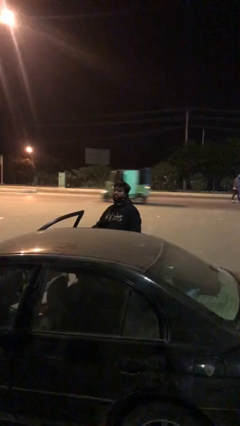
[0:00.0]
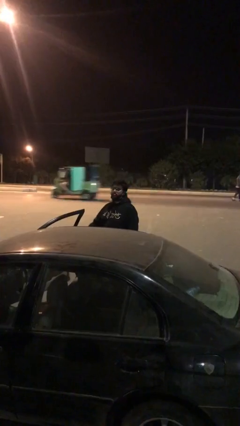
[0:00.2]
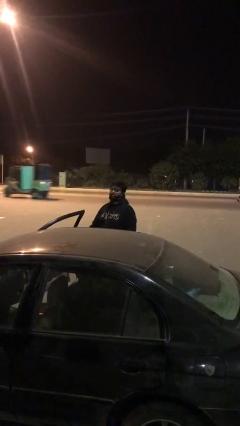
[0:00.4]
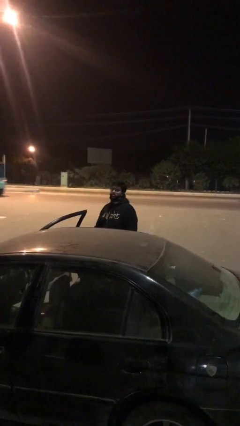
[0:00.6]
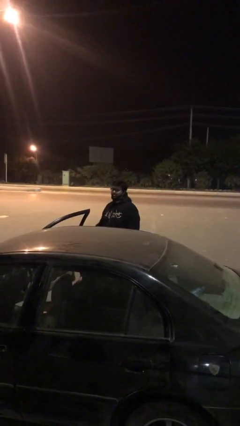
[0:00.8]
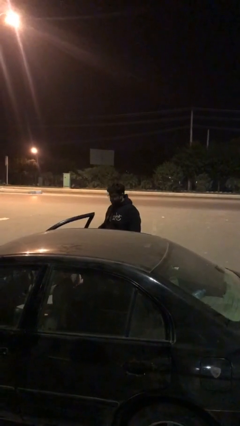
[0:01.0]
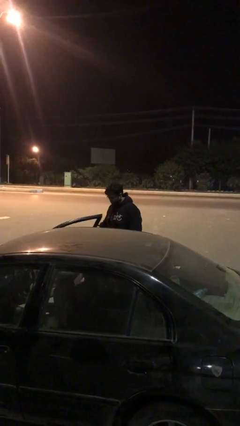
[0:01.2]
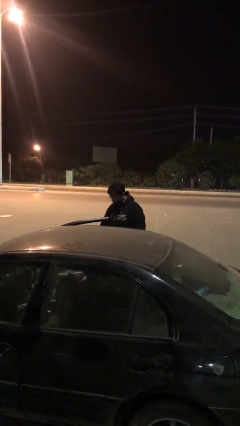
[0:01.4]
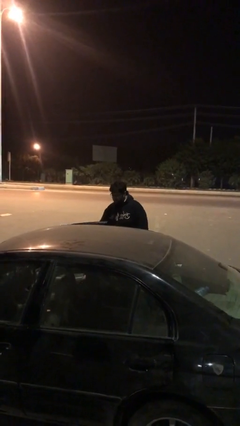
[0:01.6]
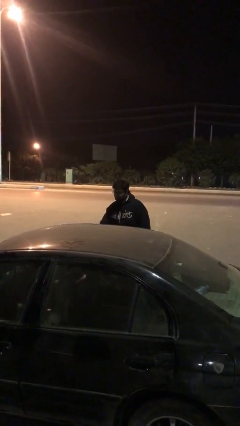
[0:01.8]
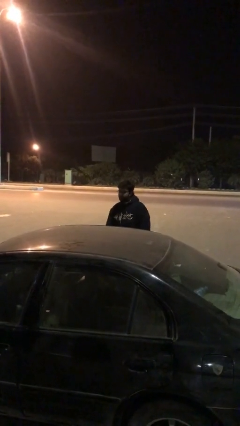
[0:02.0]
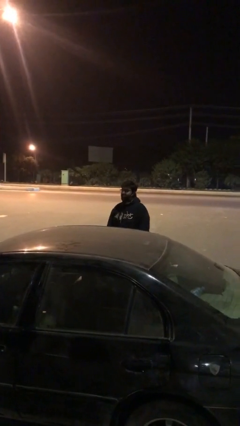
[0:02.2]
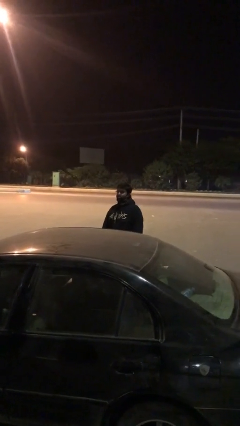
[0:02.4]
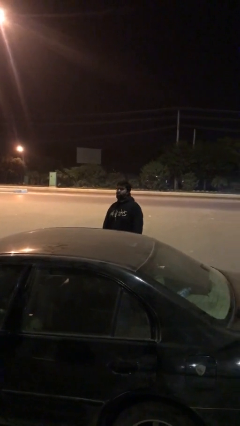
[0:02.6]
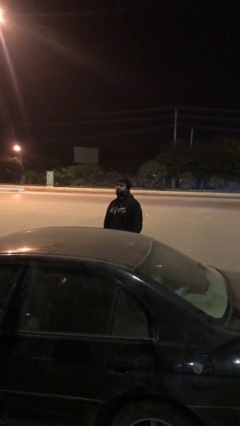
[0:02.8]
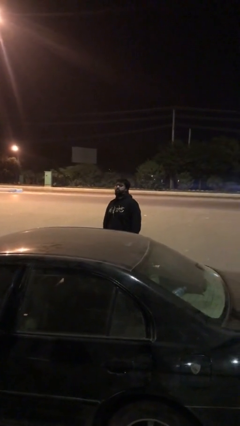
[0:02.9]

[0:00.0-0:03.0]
person closes car door

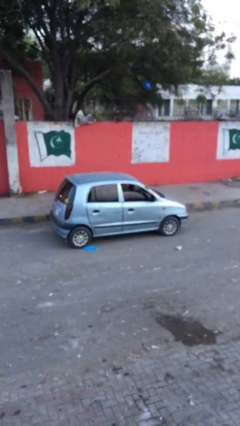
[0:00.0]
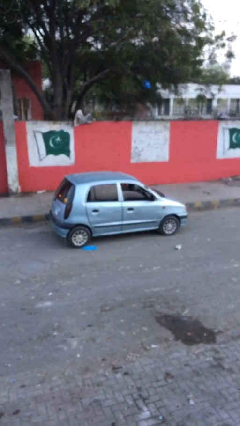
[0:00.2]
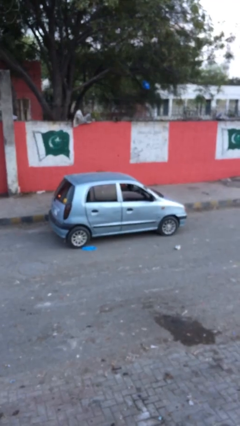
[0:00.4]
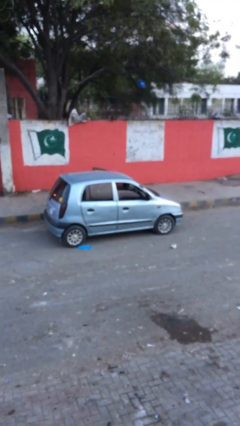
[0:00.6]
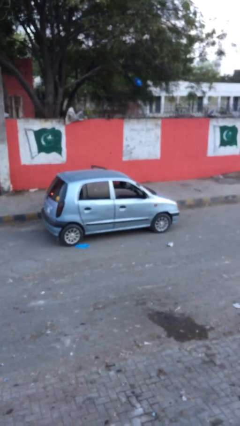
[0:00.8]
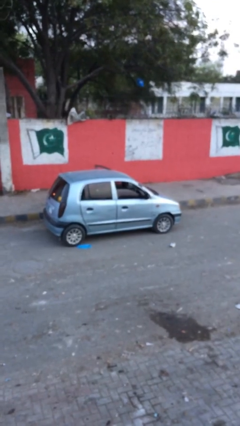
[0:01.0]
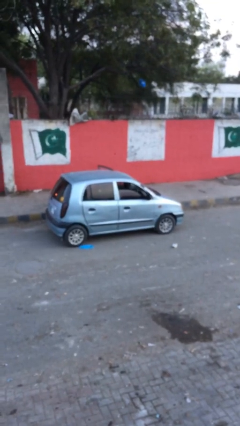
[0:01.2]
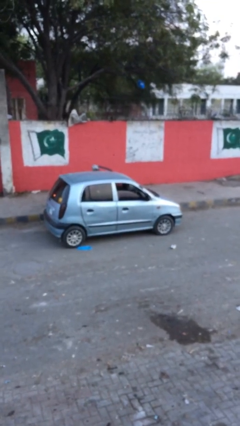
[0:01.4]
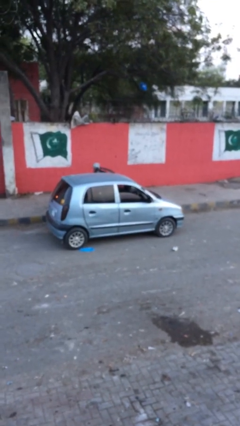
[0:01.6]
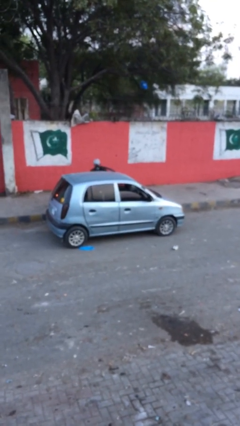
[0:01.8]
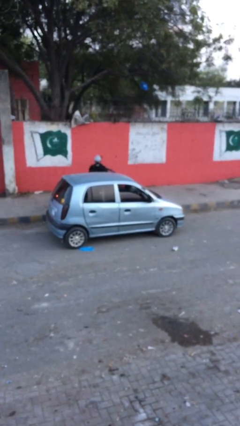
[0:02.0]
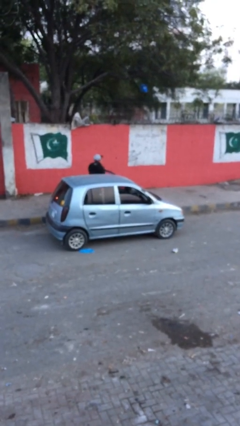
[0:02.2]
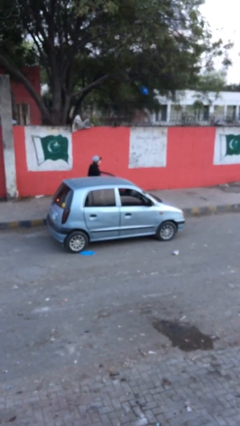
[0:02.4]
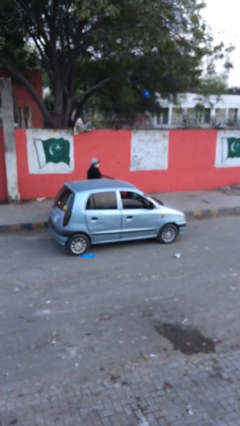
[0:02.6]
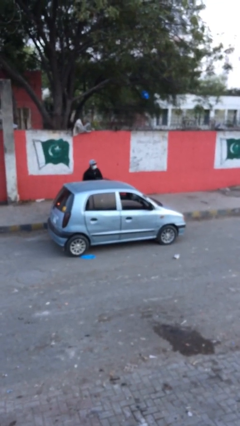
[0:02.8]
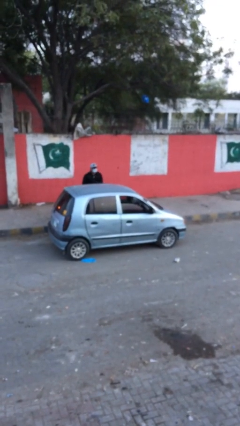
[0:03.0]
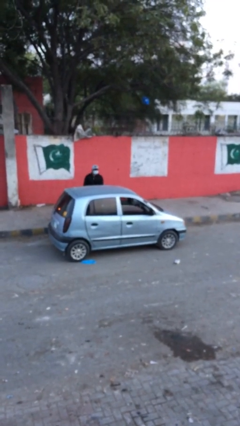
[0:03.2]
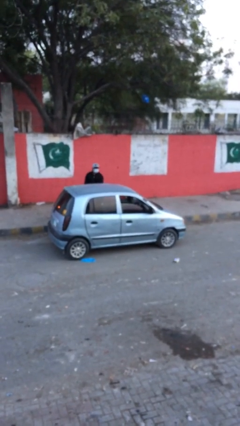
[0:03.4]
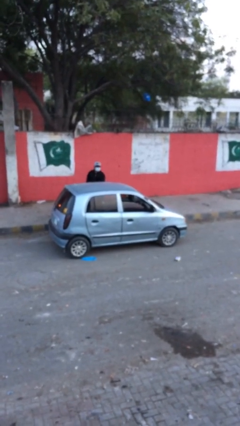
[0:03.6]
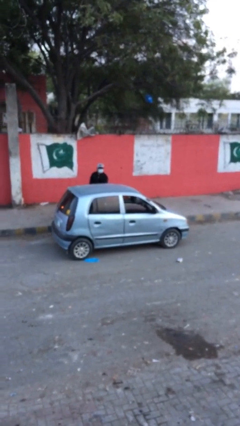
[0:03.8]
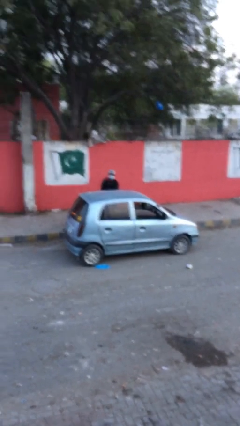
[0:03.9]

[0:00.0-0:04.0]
car drops off person

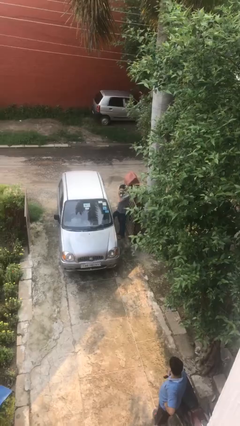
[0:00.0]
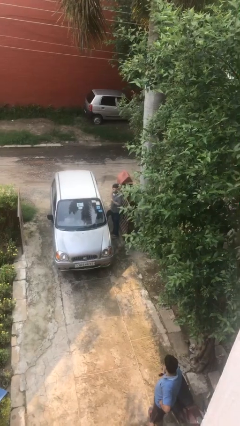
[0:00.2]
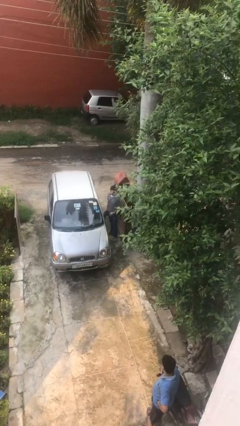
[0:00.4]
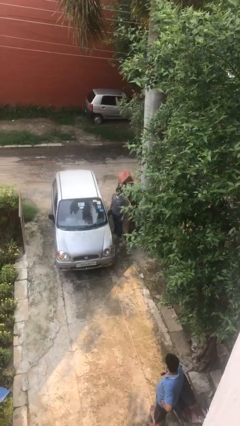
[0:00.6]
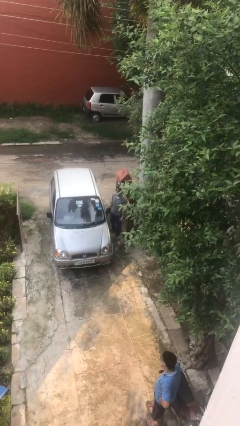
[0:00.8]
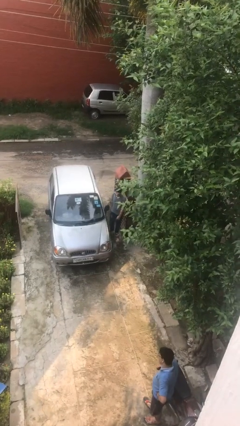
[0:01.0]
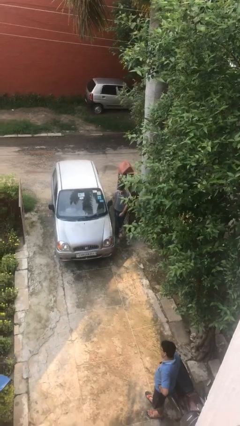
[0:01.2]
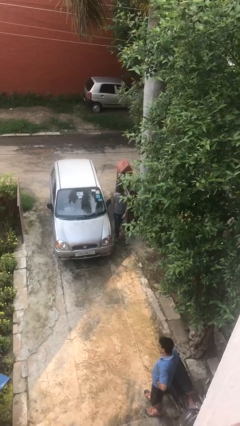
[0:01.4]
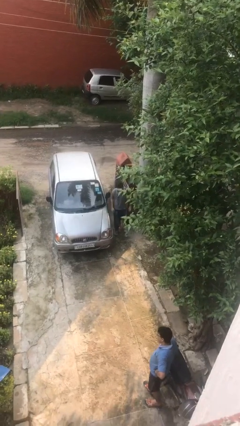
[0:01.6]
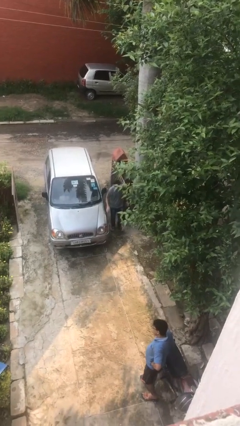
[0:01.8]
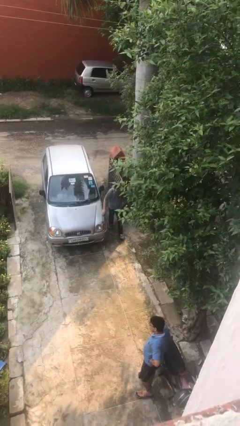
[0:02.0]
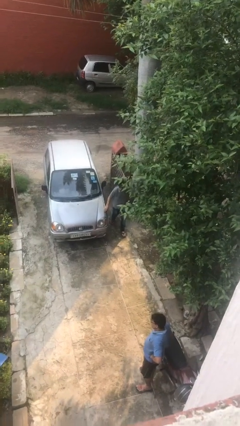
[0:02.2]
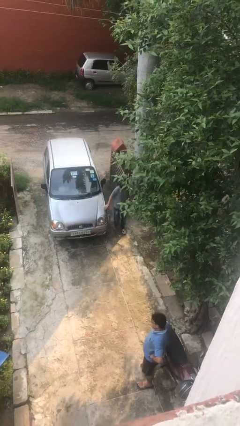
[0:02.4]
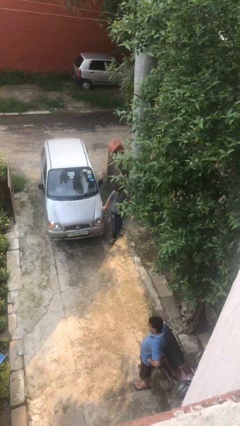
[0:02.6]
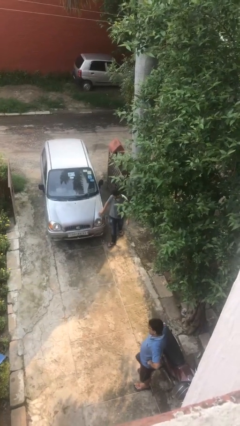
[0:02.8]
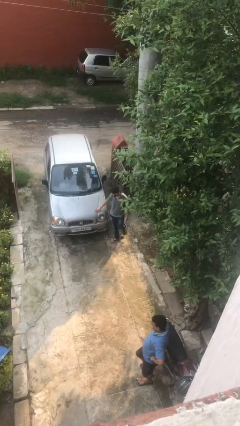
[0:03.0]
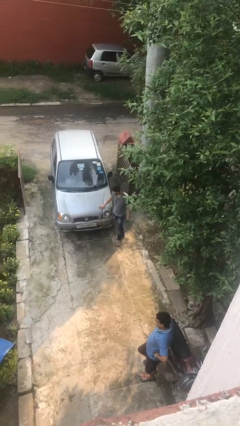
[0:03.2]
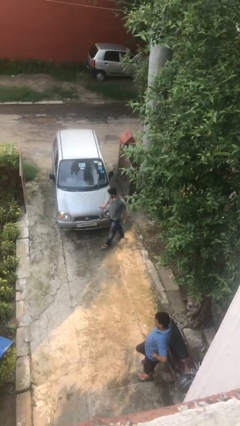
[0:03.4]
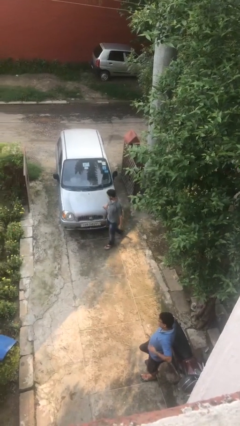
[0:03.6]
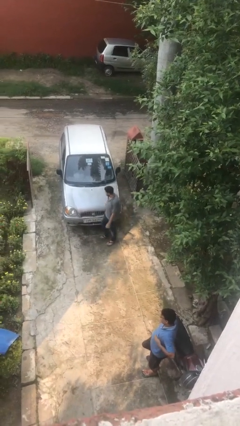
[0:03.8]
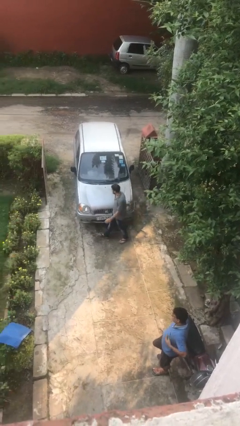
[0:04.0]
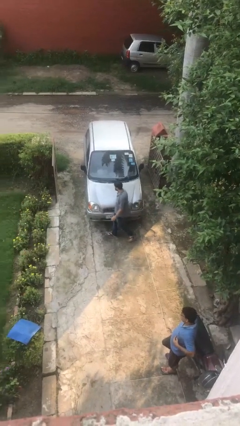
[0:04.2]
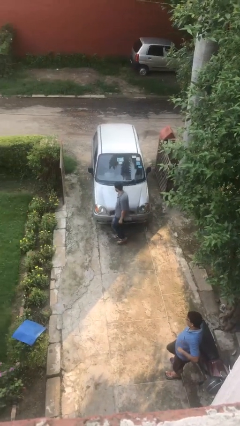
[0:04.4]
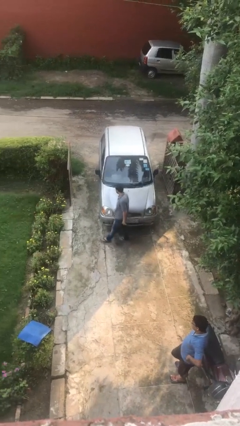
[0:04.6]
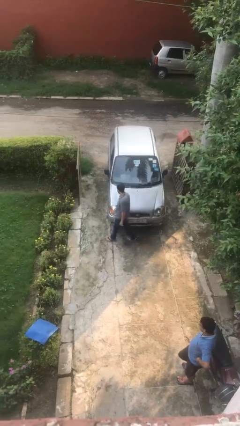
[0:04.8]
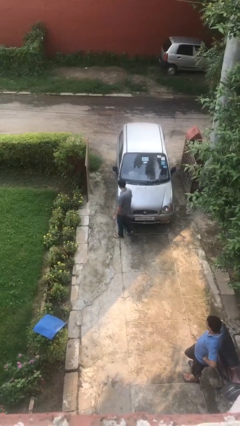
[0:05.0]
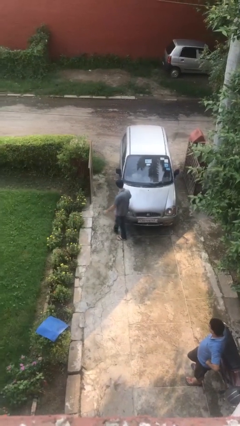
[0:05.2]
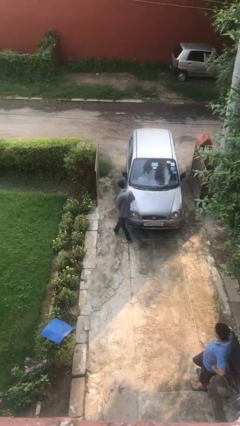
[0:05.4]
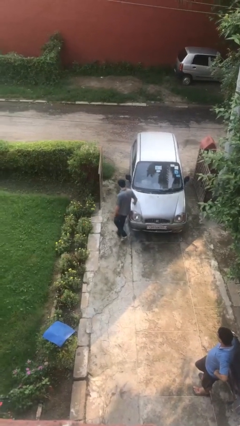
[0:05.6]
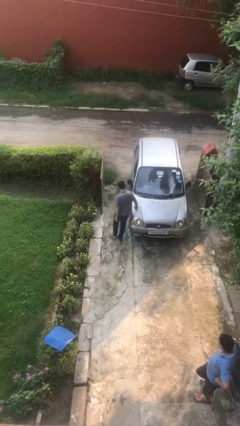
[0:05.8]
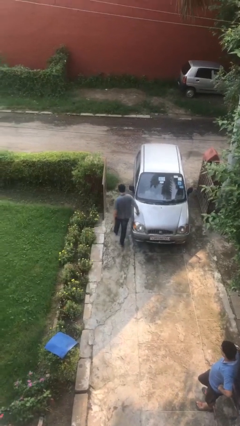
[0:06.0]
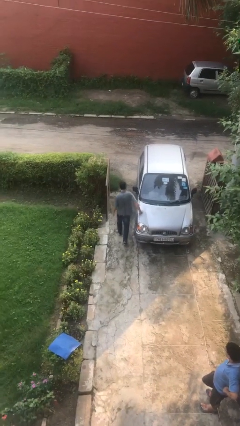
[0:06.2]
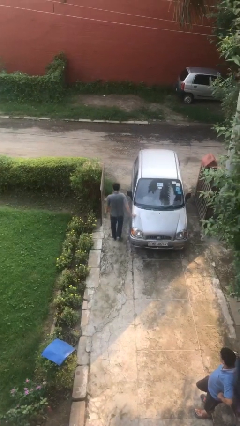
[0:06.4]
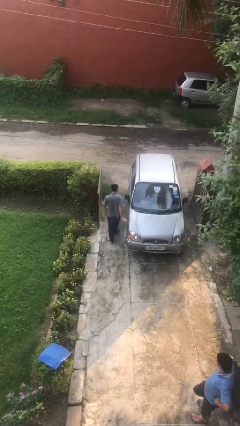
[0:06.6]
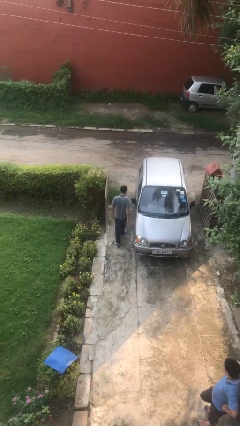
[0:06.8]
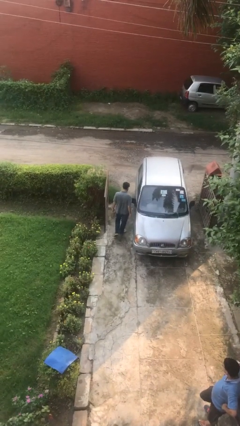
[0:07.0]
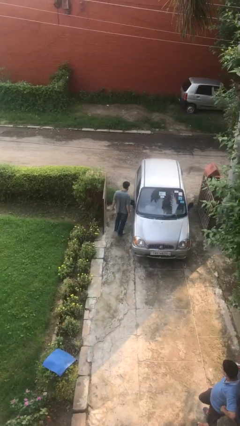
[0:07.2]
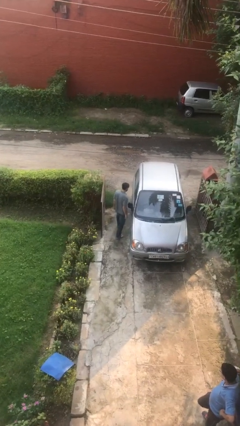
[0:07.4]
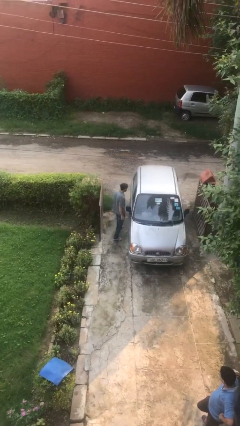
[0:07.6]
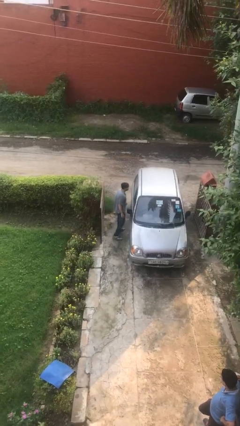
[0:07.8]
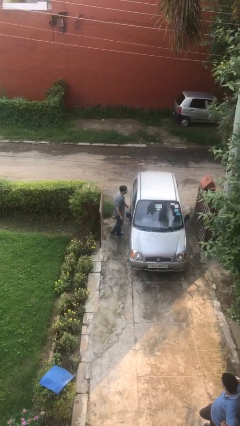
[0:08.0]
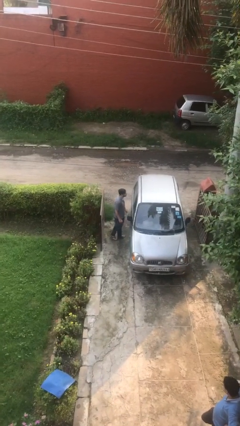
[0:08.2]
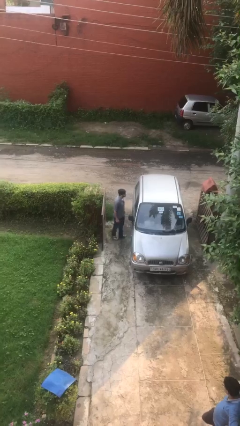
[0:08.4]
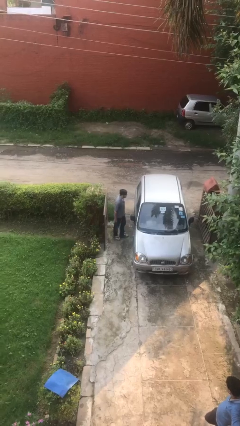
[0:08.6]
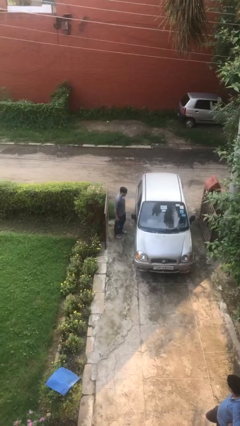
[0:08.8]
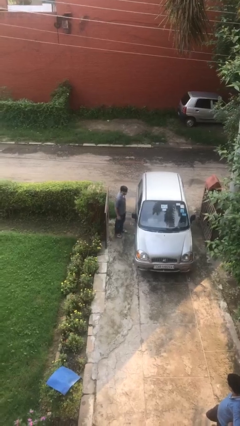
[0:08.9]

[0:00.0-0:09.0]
person walks around car

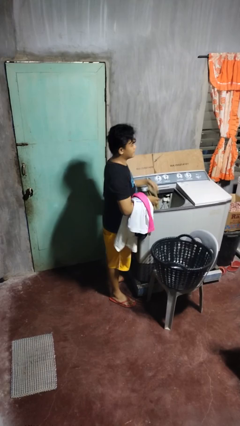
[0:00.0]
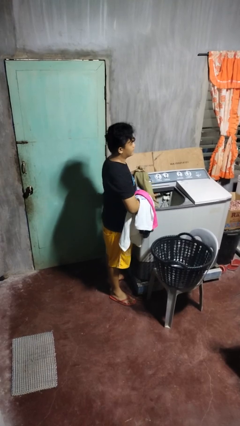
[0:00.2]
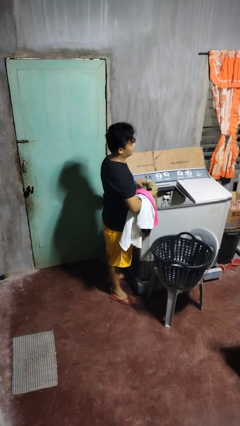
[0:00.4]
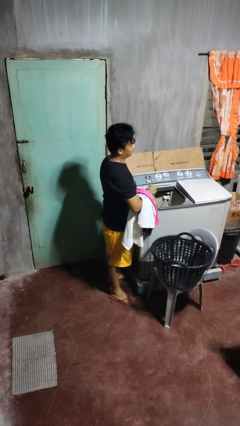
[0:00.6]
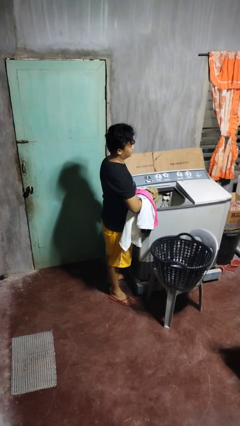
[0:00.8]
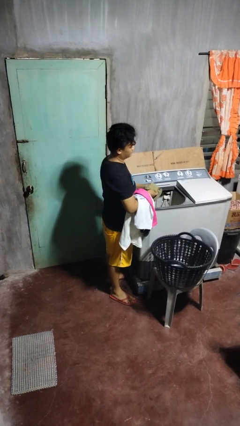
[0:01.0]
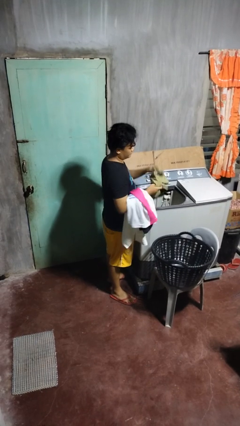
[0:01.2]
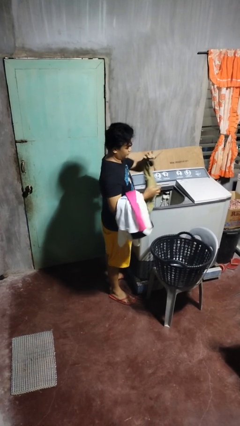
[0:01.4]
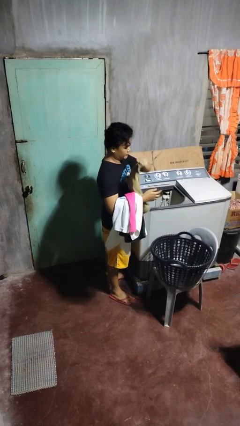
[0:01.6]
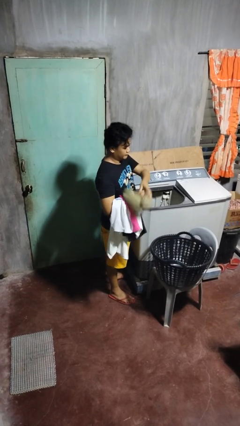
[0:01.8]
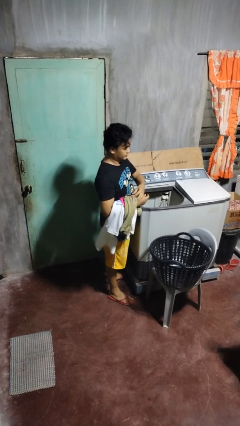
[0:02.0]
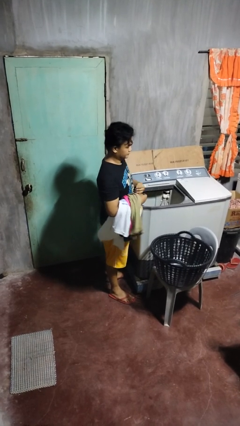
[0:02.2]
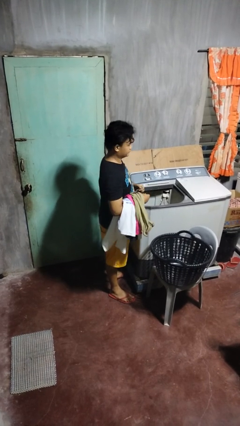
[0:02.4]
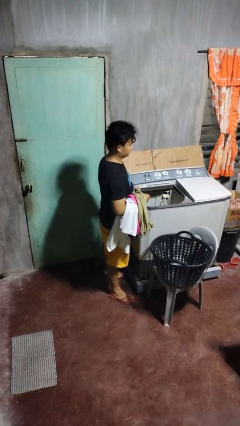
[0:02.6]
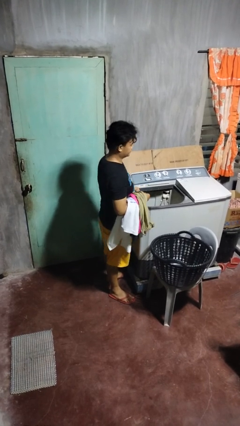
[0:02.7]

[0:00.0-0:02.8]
person loads clotheswasher
